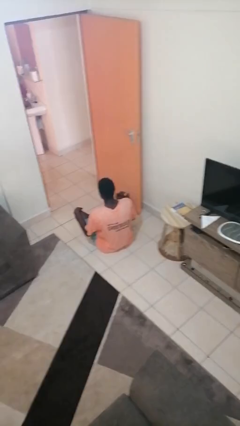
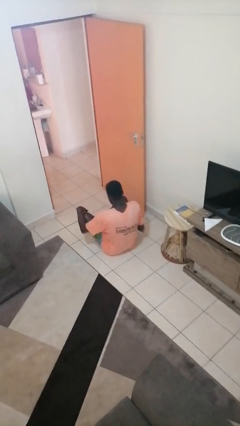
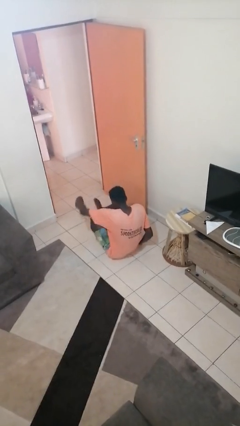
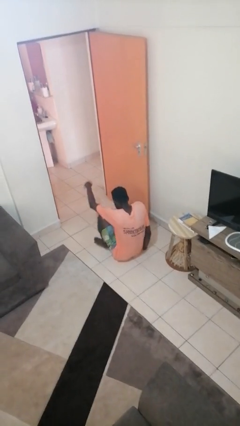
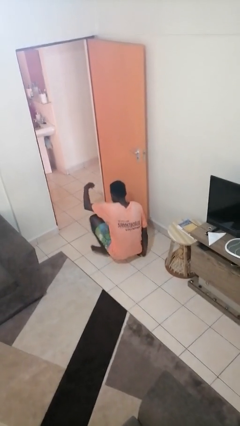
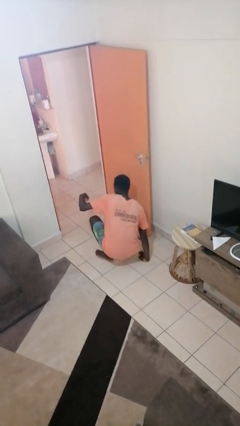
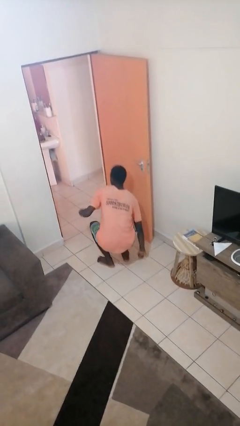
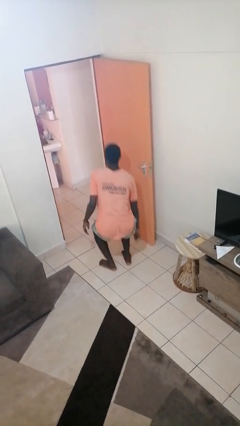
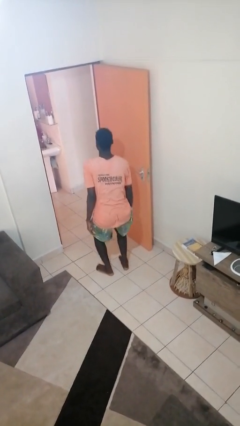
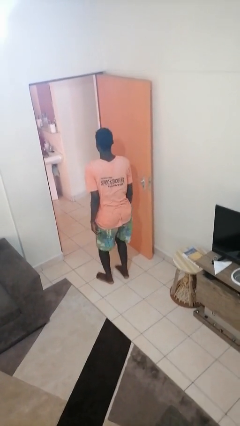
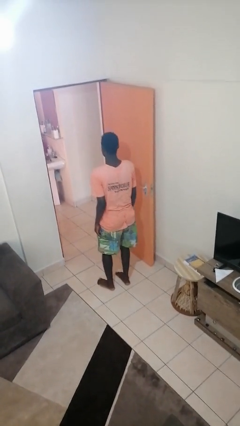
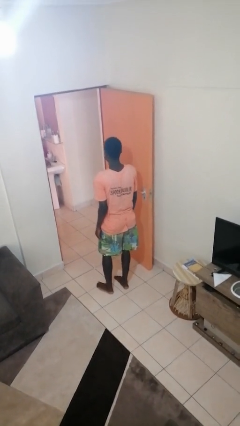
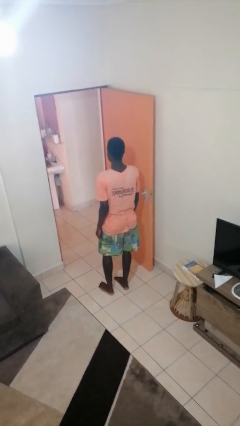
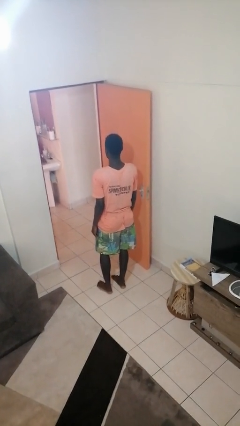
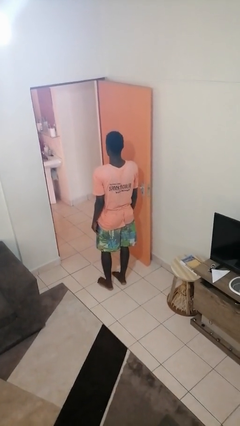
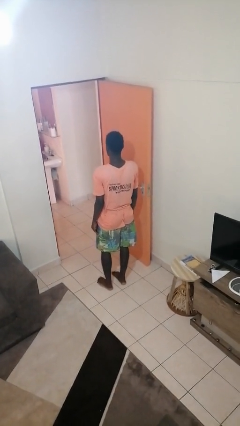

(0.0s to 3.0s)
person stands up from floor

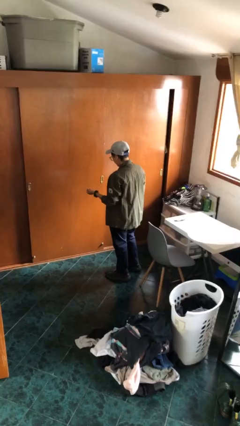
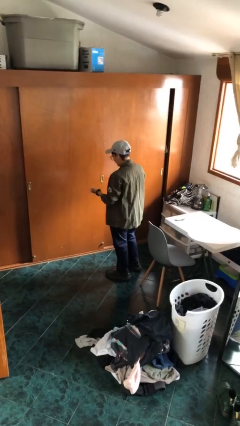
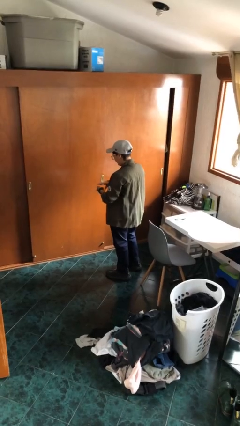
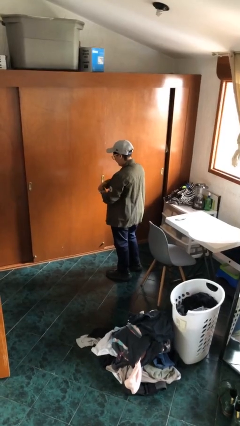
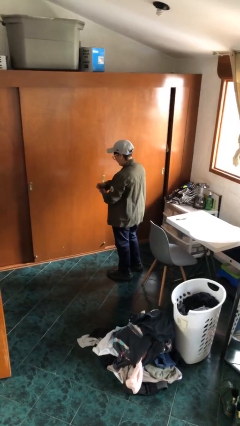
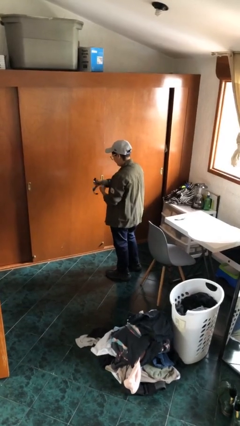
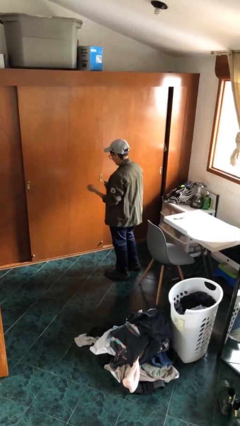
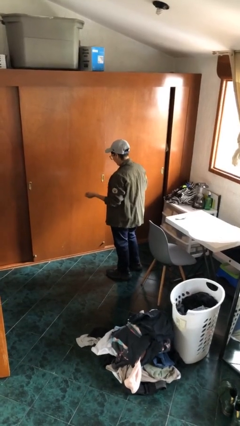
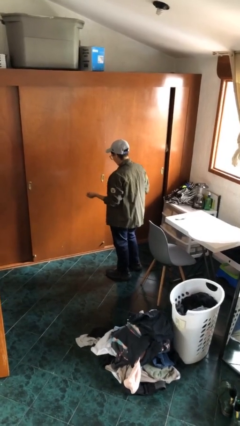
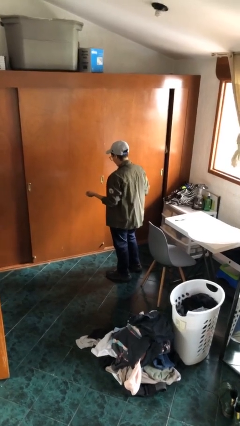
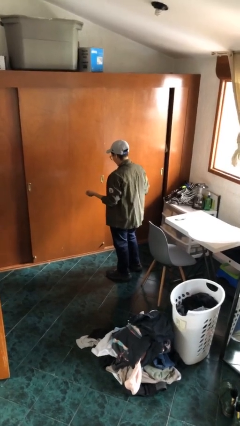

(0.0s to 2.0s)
person takes off wristwatch

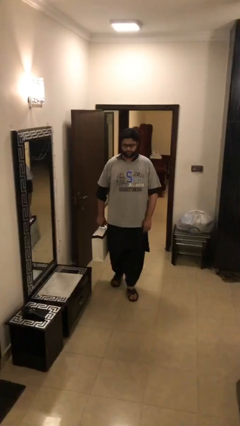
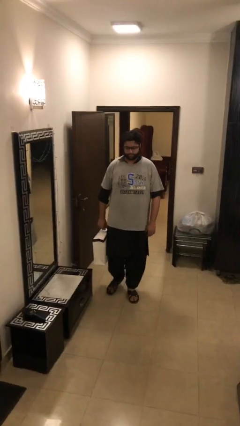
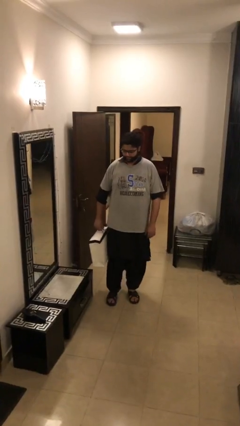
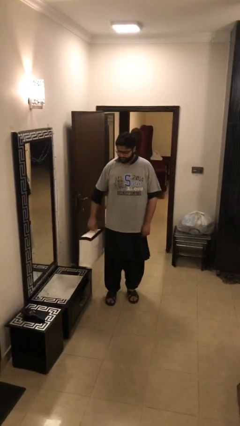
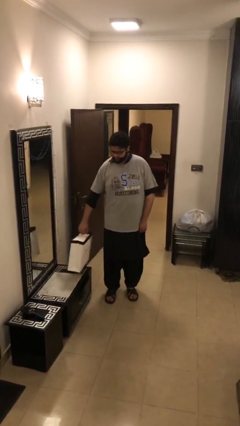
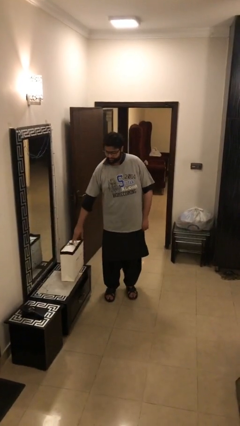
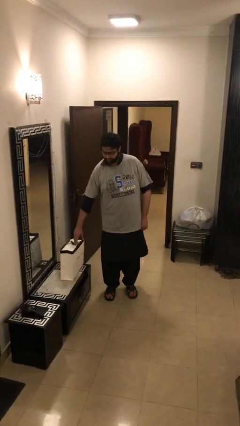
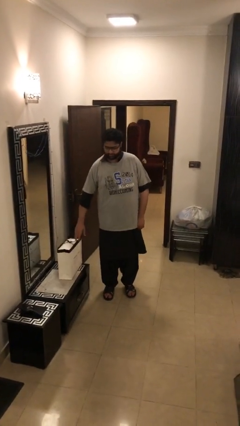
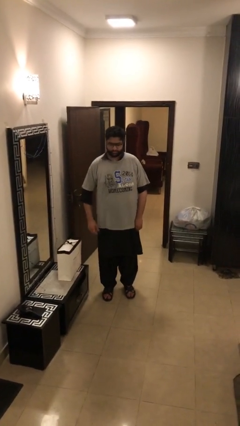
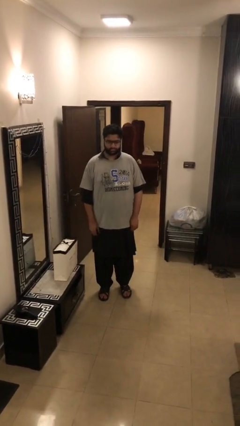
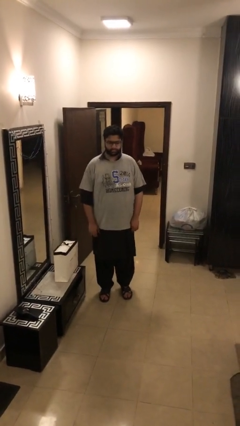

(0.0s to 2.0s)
person puts down object on table

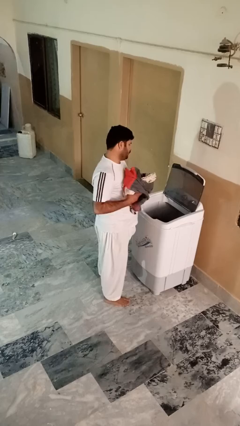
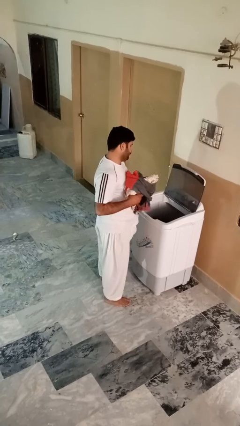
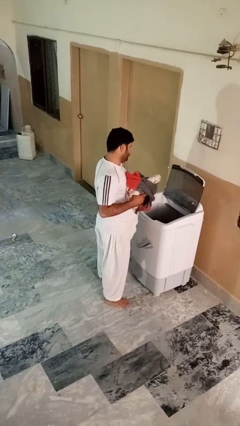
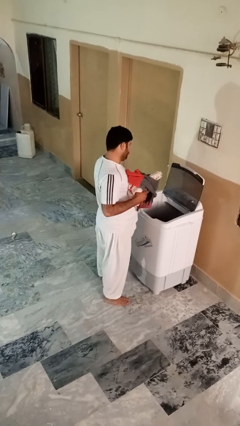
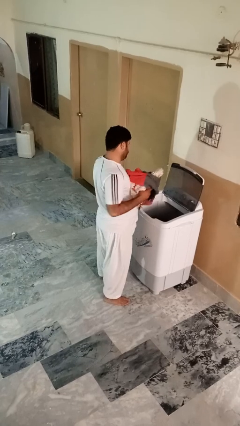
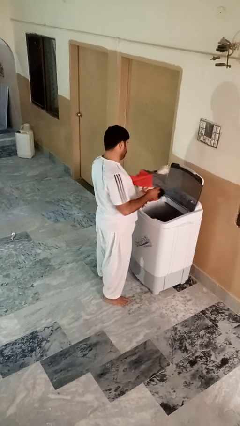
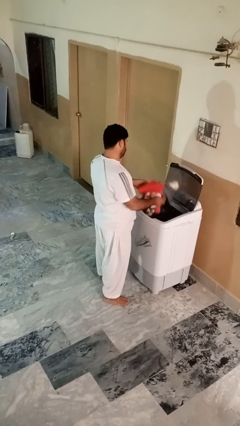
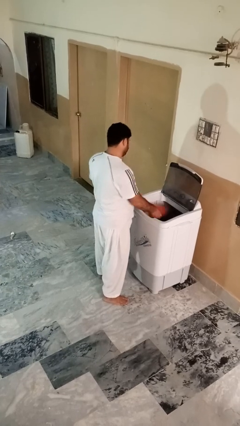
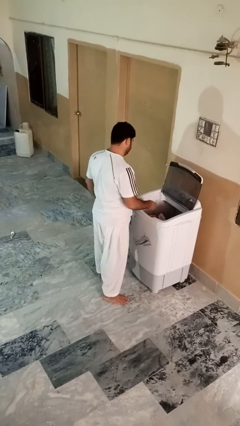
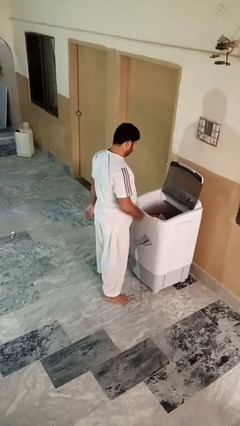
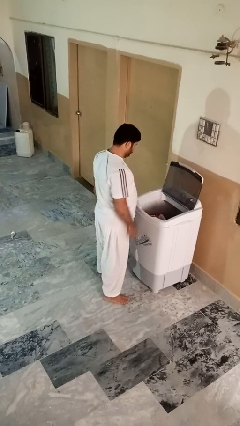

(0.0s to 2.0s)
person loads clotheswasher

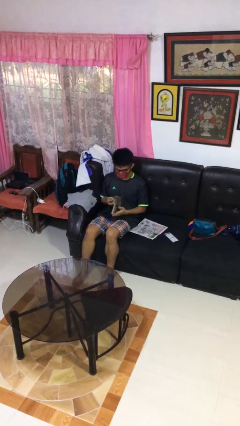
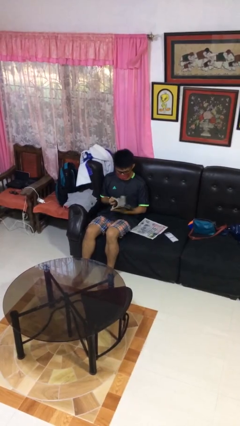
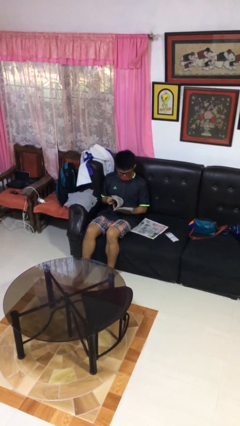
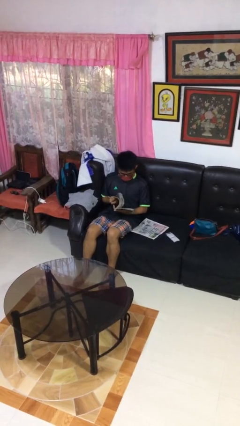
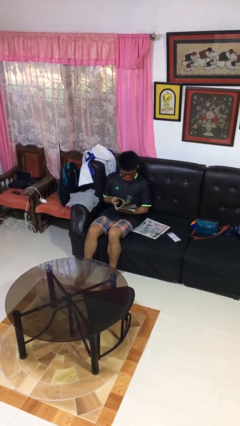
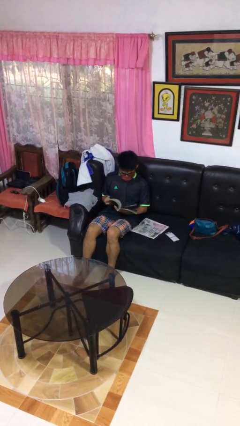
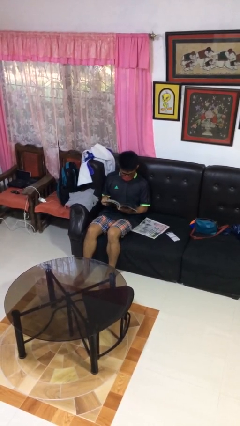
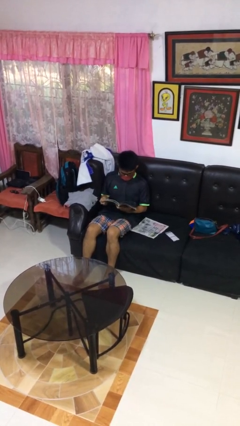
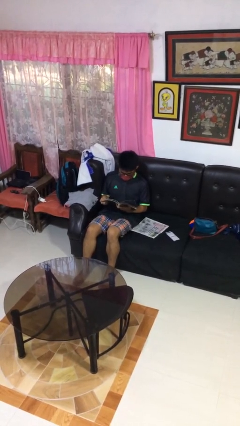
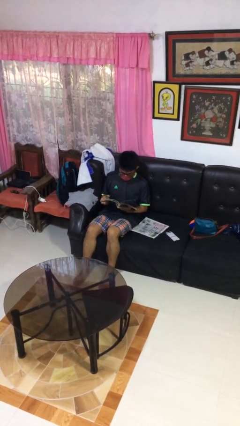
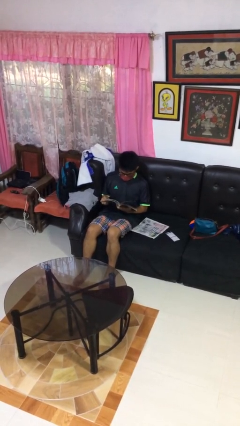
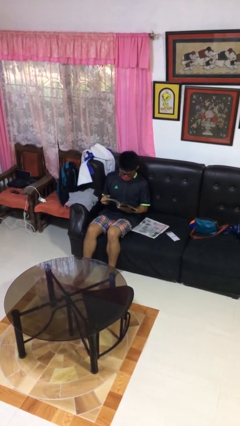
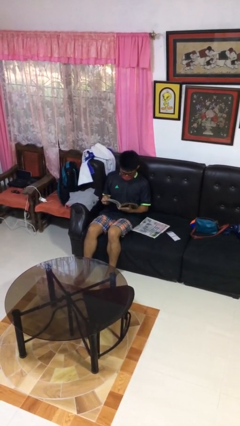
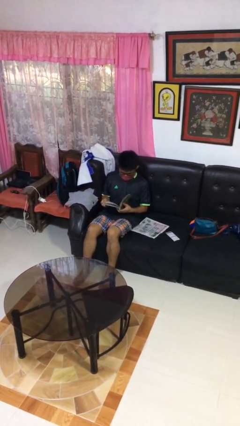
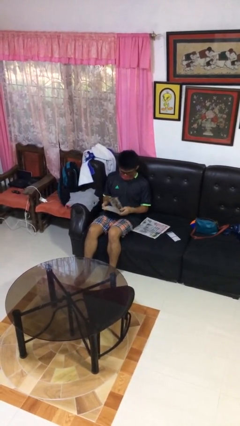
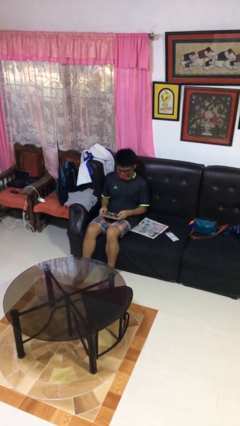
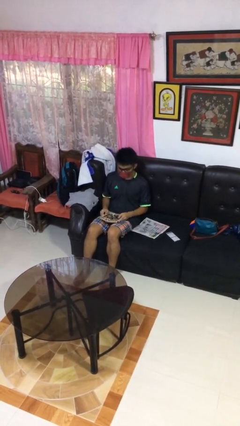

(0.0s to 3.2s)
person reads magazine

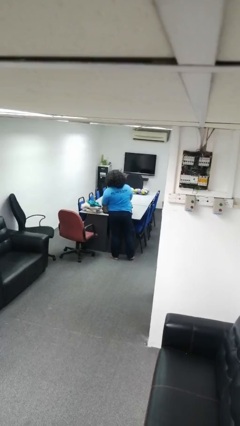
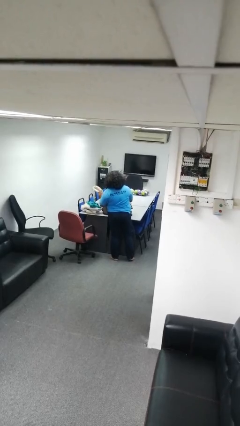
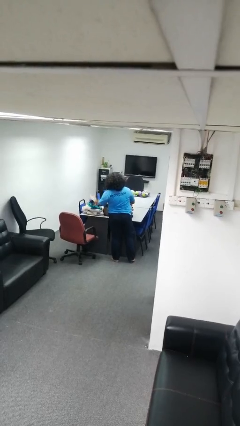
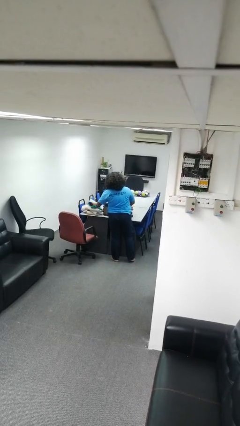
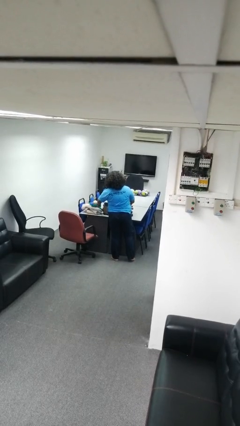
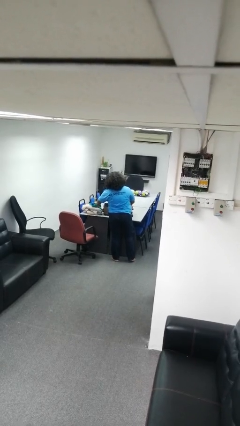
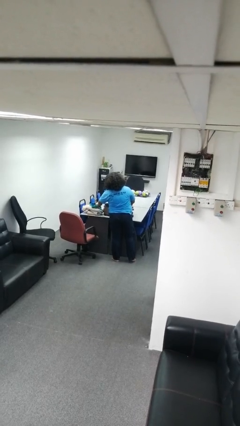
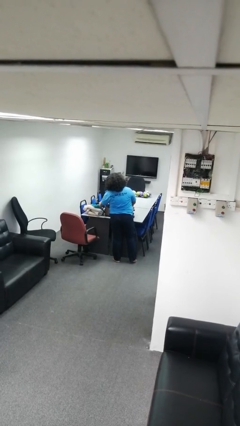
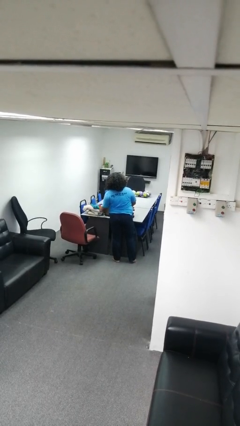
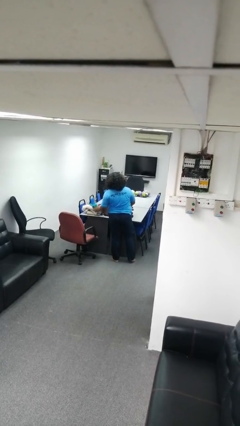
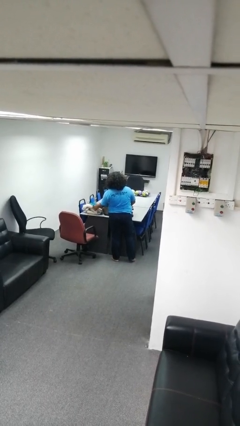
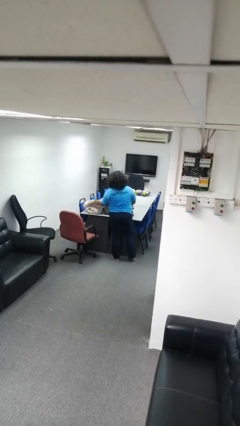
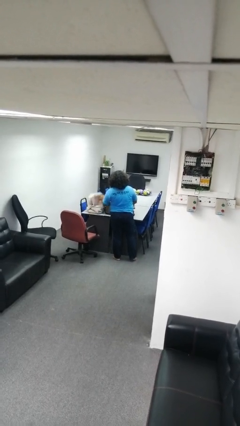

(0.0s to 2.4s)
person unloads clothes from suitcase

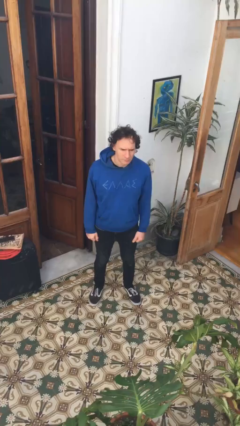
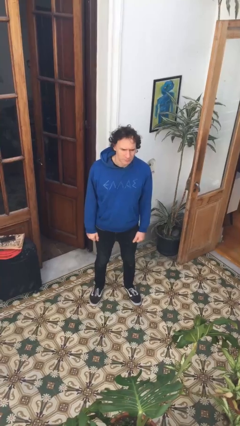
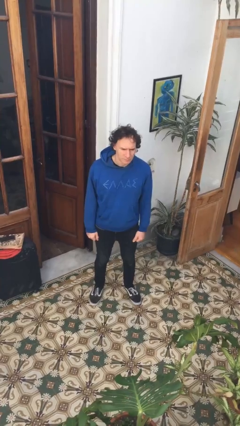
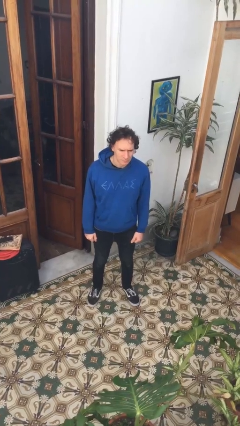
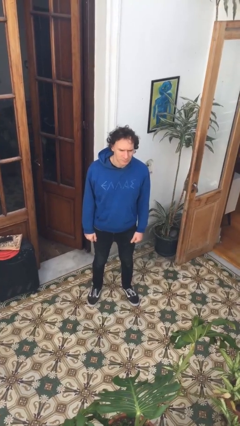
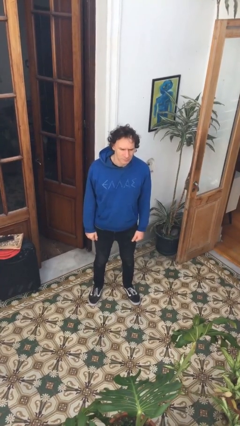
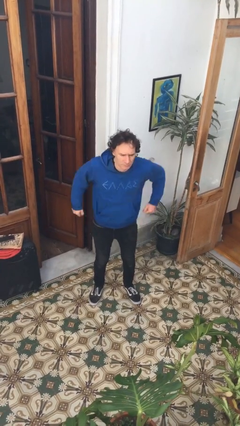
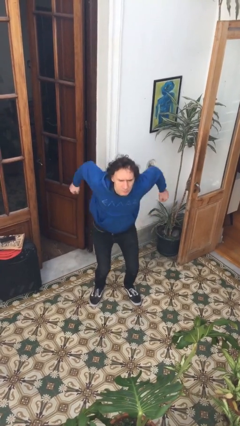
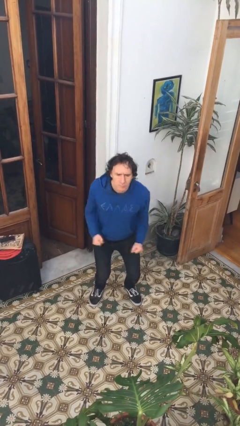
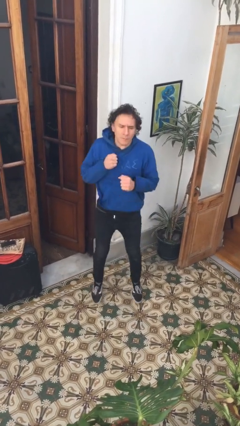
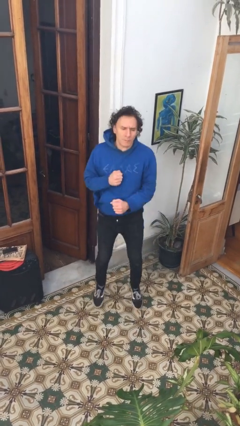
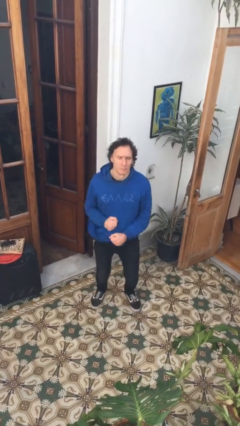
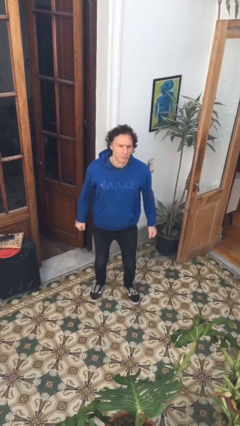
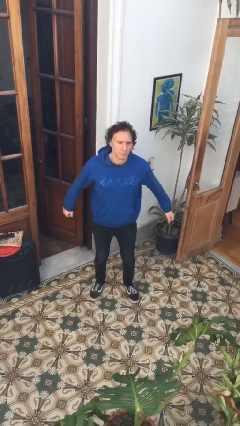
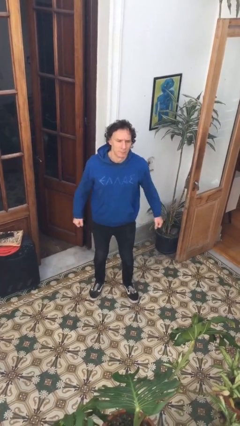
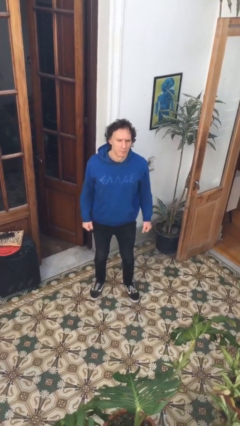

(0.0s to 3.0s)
person jumps
